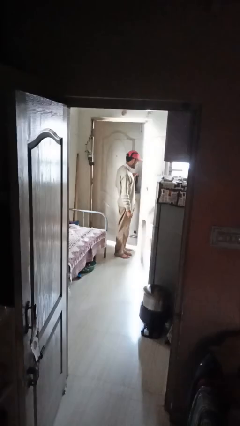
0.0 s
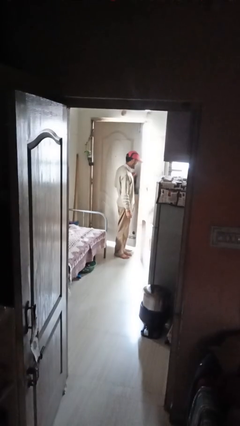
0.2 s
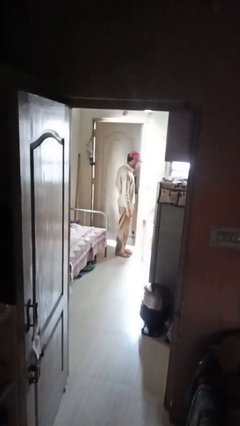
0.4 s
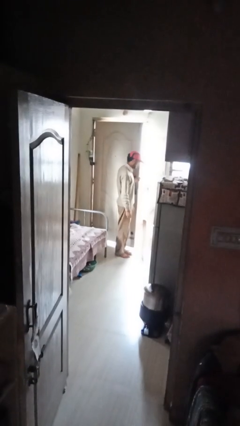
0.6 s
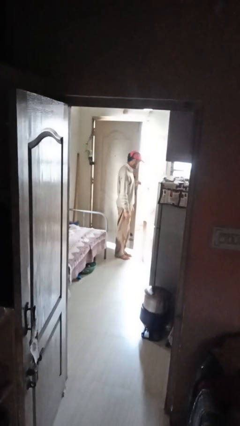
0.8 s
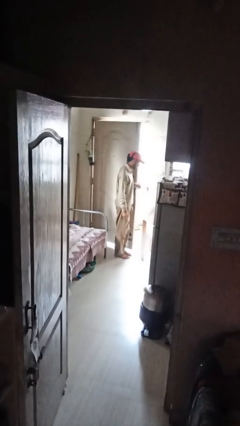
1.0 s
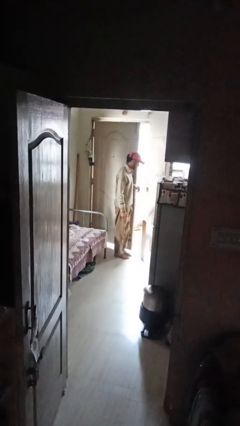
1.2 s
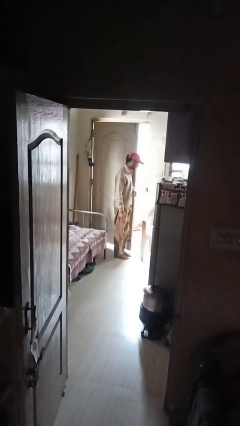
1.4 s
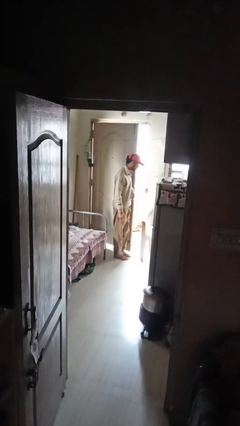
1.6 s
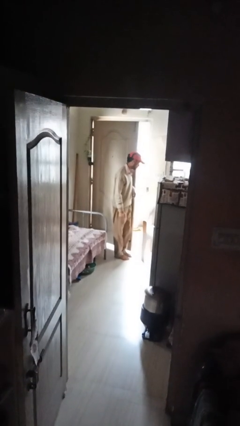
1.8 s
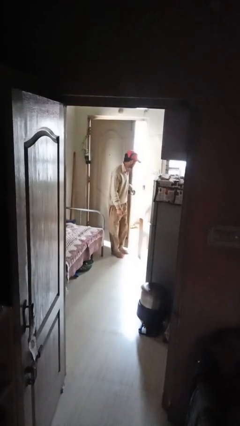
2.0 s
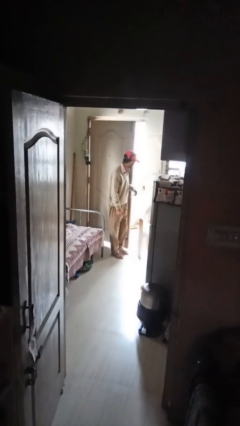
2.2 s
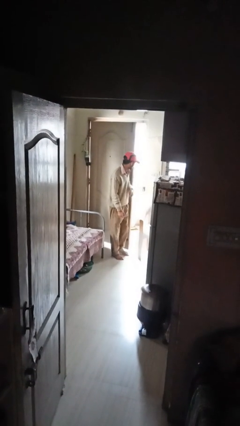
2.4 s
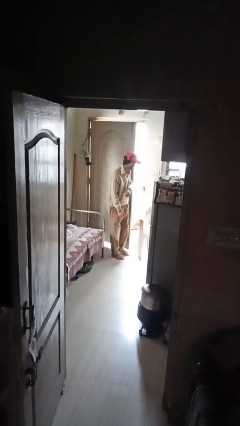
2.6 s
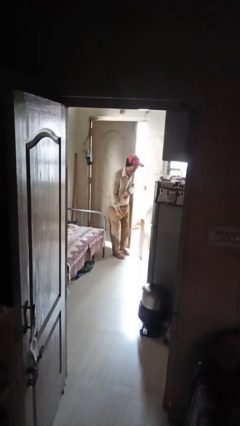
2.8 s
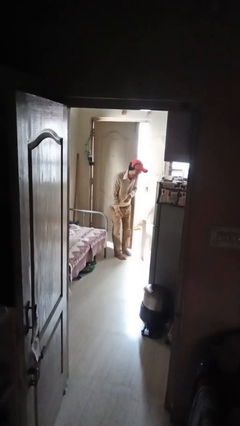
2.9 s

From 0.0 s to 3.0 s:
person opens facility door

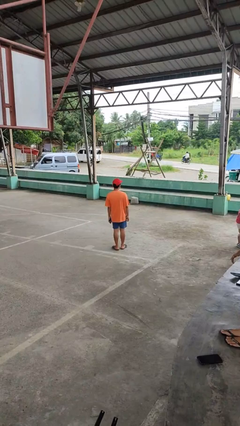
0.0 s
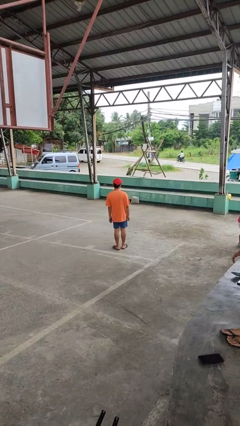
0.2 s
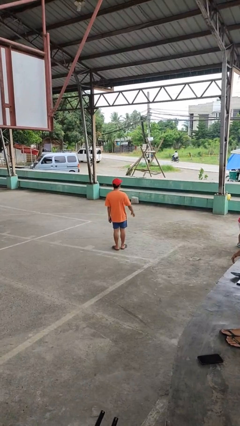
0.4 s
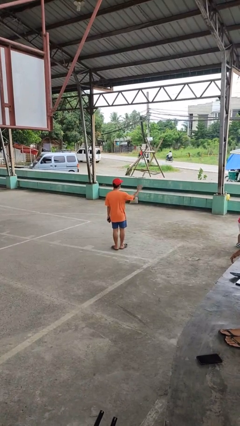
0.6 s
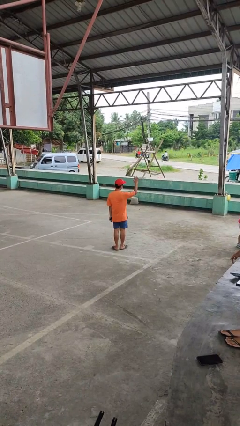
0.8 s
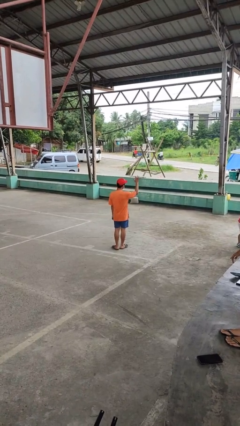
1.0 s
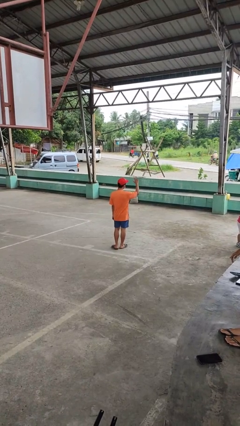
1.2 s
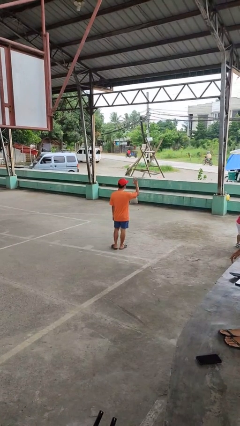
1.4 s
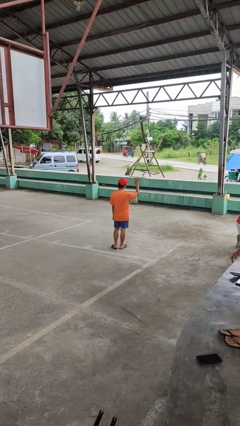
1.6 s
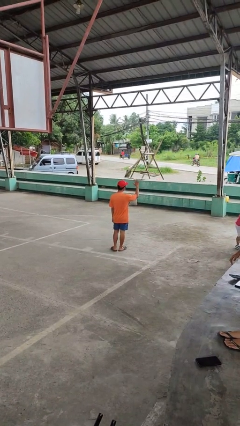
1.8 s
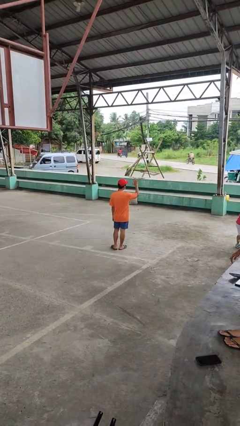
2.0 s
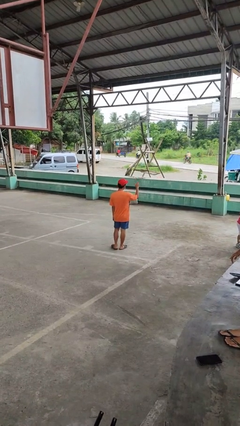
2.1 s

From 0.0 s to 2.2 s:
person waves at person

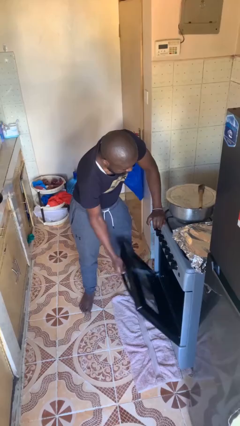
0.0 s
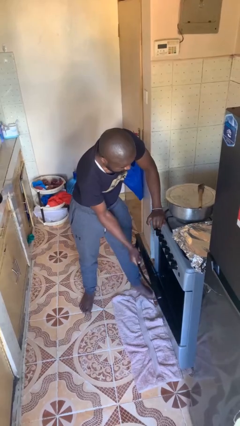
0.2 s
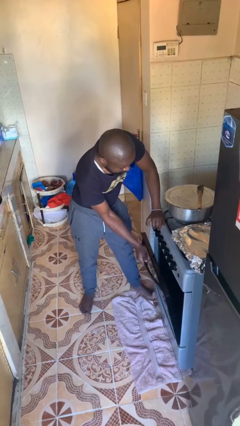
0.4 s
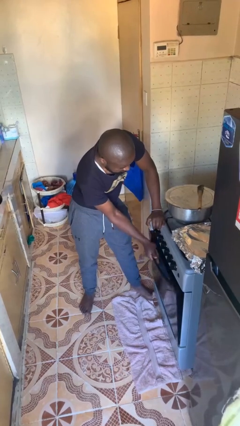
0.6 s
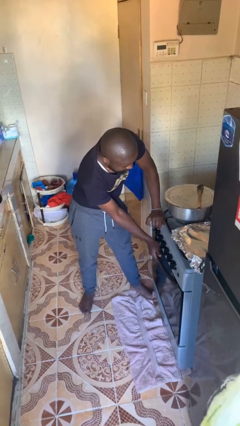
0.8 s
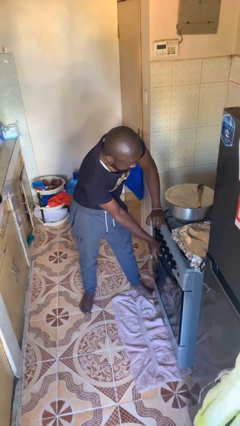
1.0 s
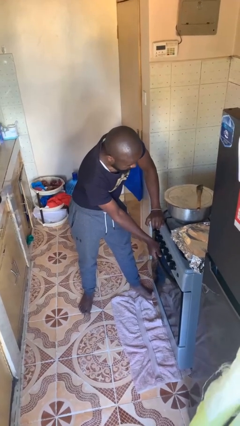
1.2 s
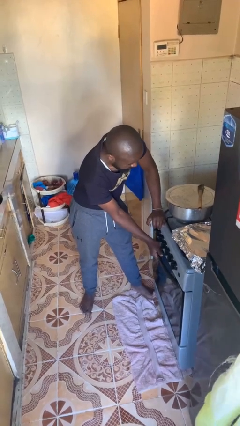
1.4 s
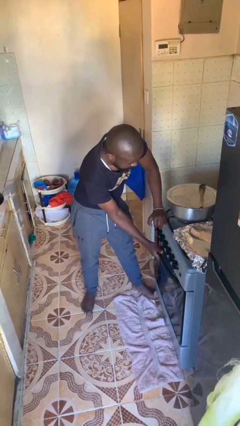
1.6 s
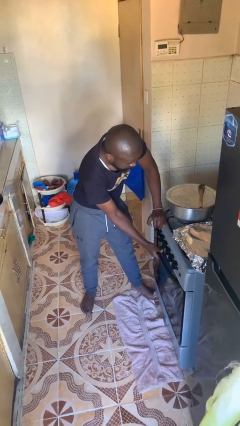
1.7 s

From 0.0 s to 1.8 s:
person closes oven door

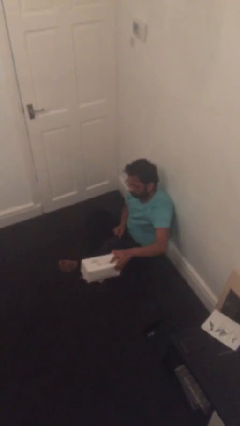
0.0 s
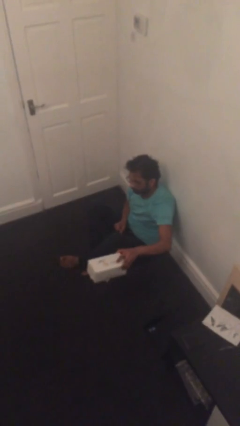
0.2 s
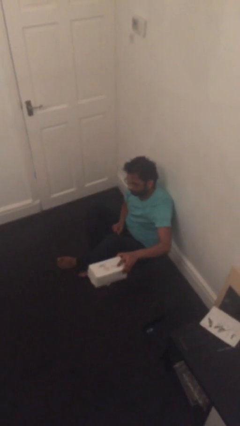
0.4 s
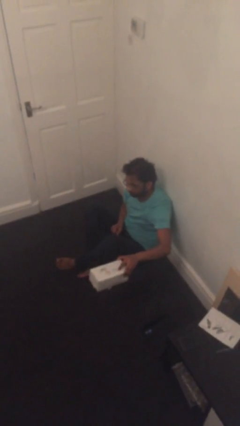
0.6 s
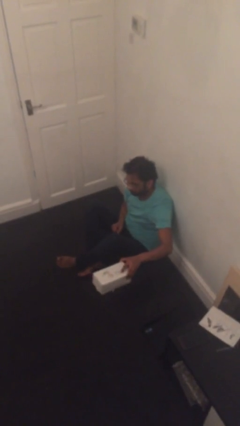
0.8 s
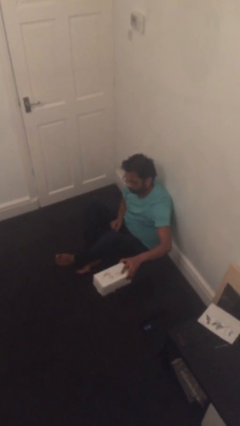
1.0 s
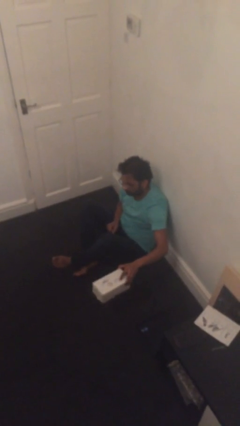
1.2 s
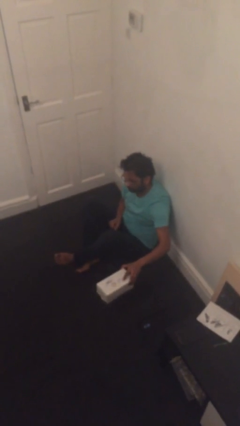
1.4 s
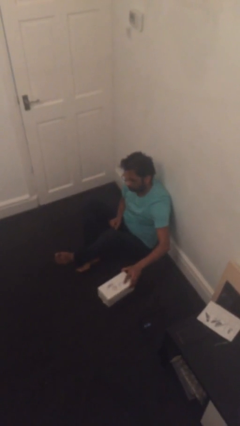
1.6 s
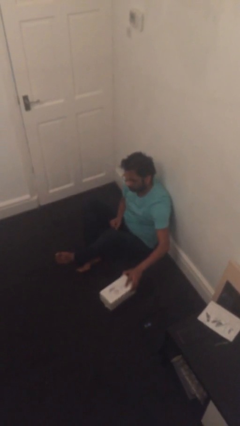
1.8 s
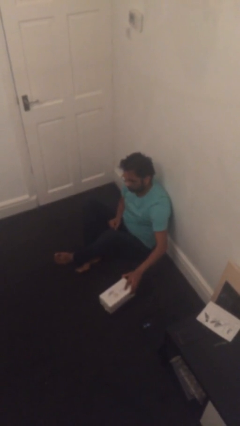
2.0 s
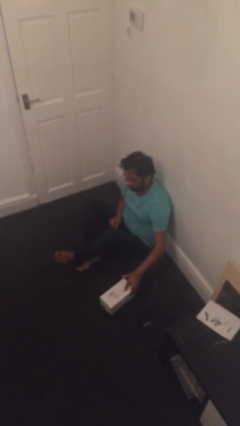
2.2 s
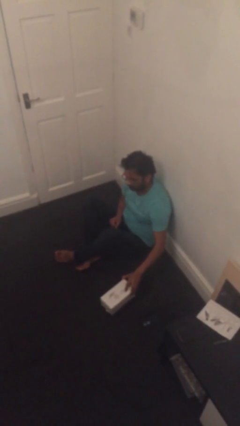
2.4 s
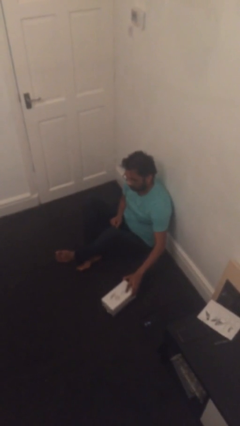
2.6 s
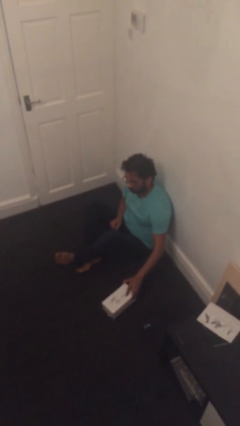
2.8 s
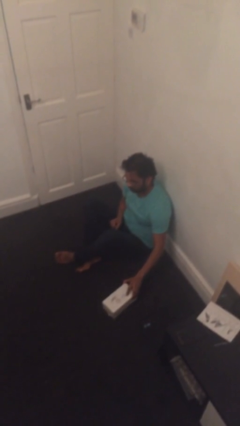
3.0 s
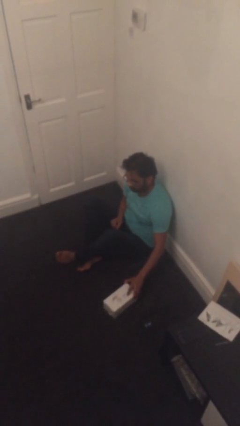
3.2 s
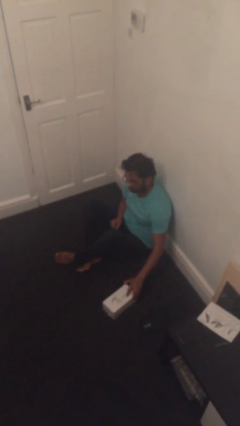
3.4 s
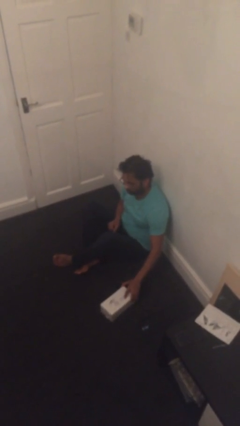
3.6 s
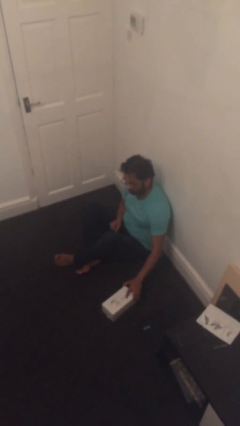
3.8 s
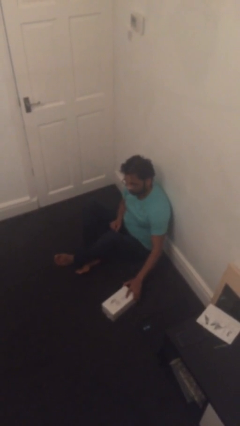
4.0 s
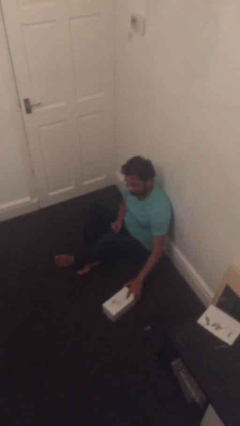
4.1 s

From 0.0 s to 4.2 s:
person puts down object on floor

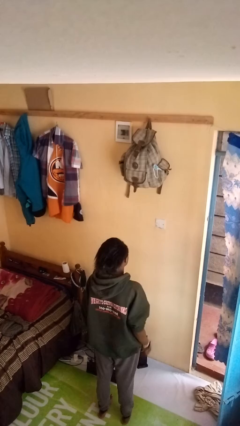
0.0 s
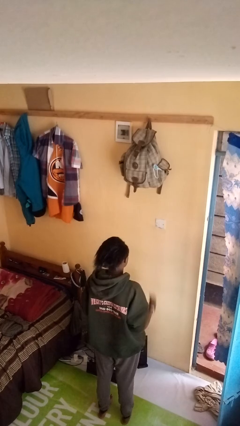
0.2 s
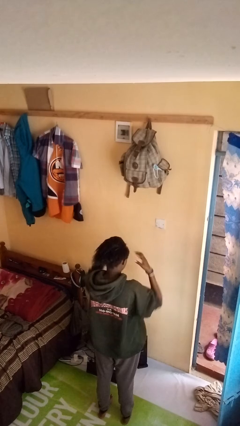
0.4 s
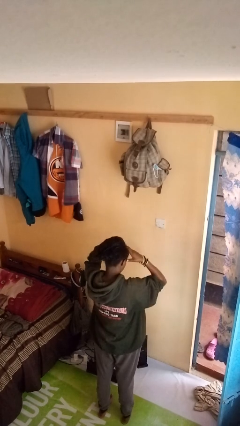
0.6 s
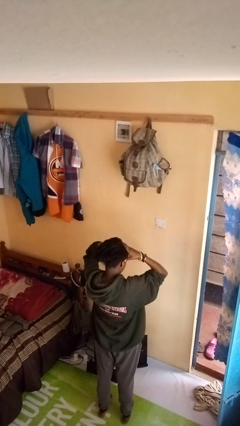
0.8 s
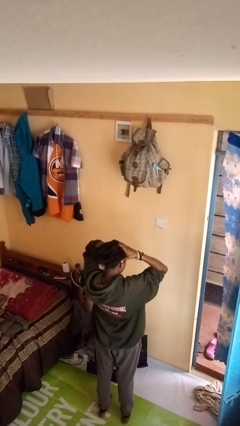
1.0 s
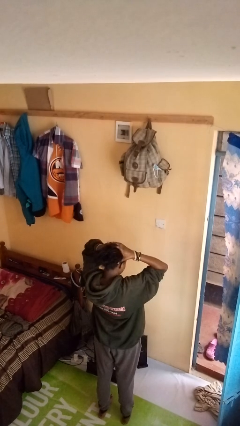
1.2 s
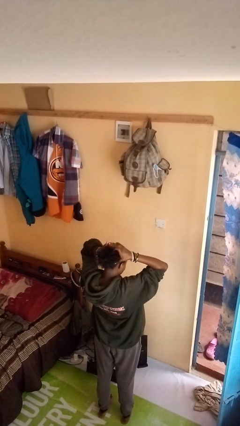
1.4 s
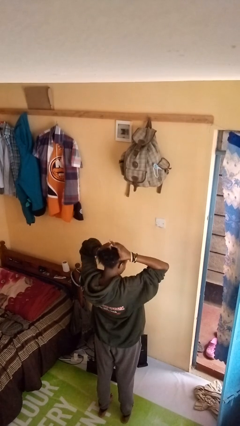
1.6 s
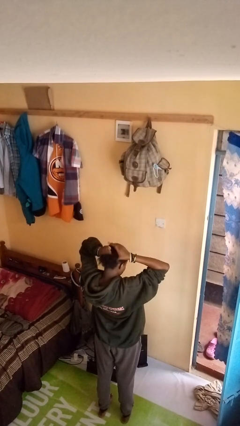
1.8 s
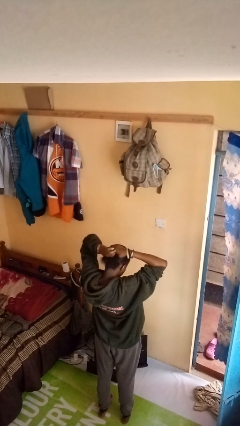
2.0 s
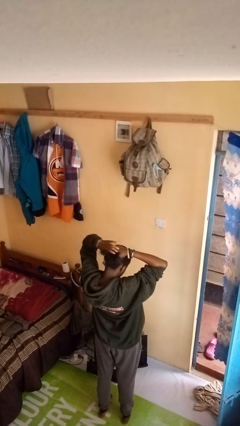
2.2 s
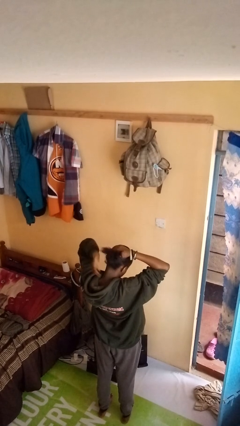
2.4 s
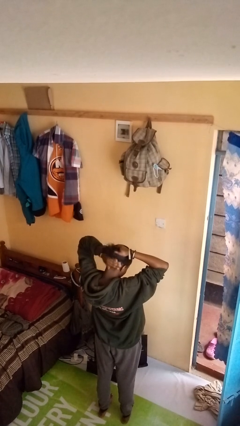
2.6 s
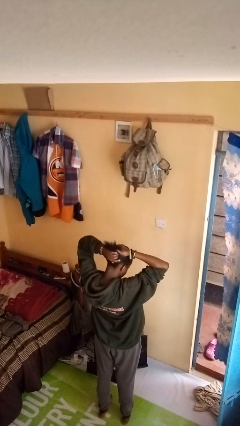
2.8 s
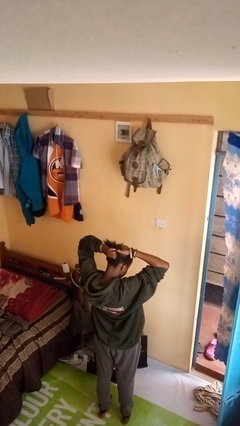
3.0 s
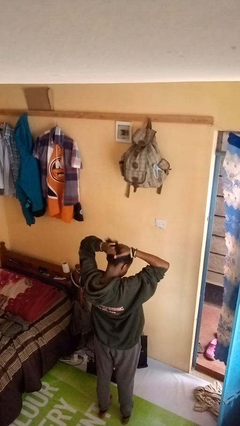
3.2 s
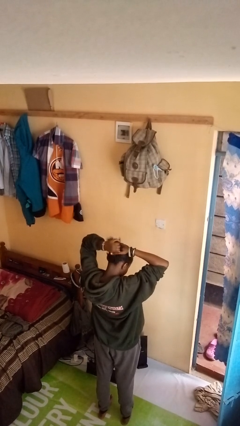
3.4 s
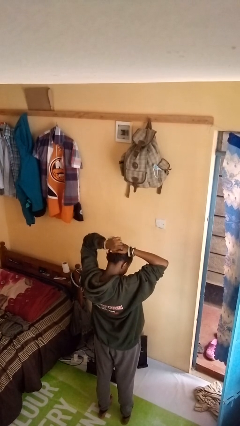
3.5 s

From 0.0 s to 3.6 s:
person strokes hair

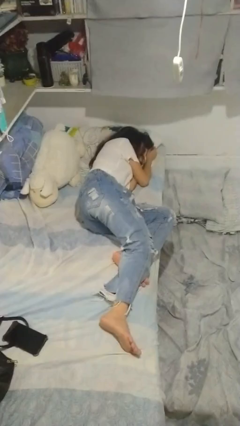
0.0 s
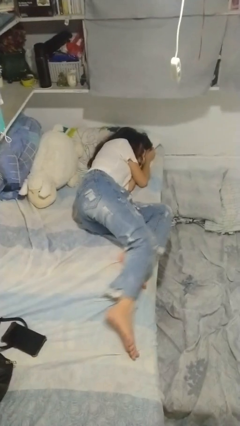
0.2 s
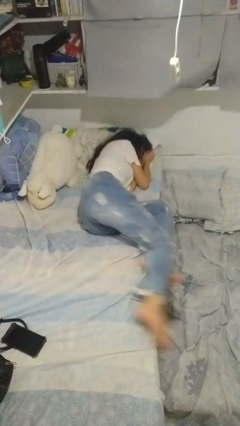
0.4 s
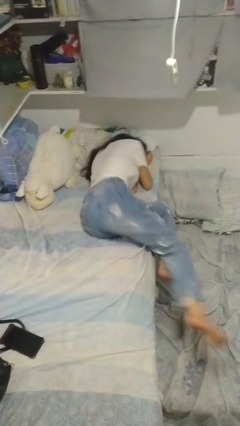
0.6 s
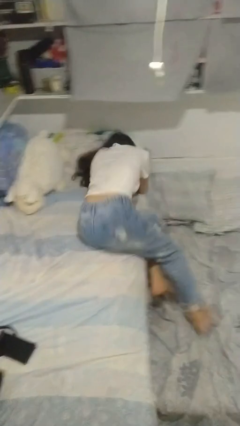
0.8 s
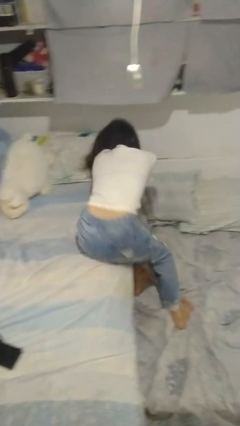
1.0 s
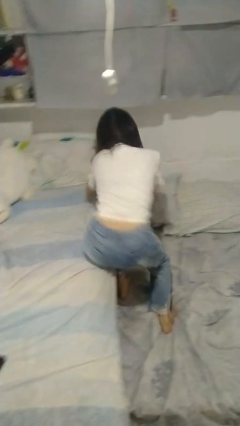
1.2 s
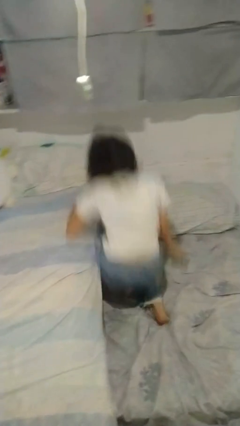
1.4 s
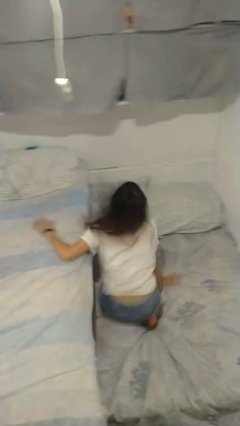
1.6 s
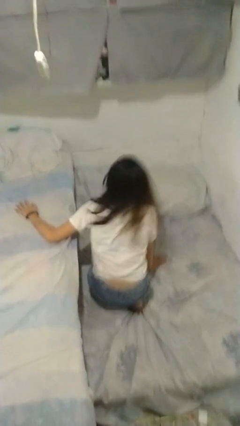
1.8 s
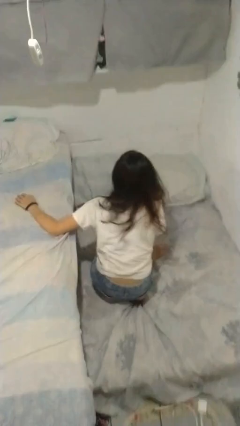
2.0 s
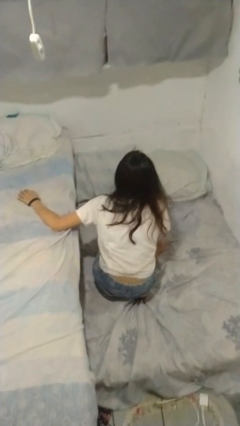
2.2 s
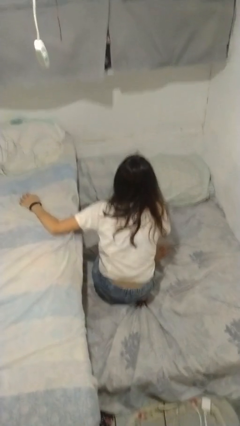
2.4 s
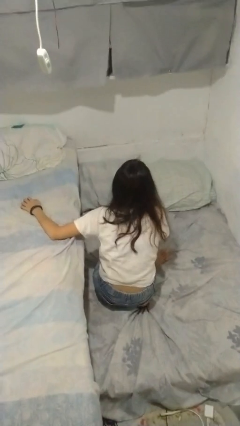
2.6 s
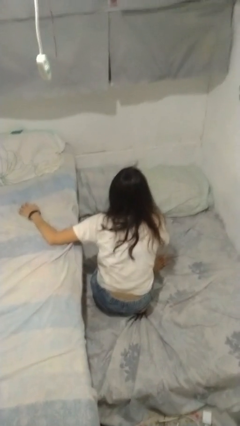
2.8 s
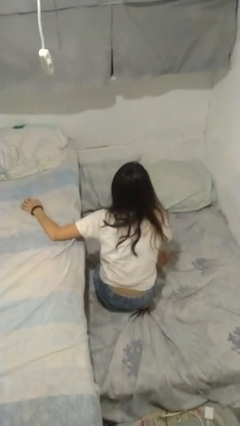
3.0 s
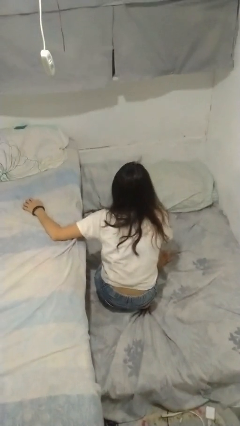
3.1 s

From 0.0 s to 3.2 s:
person falls from bed
